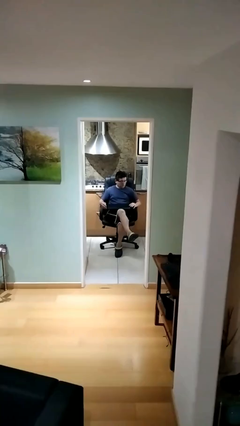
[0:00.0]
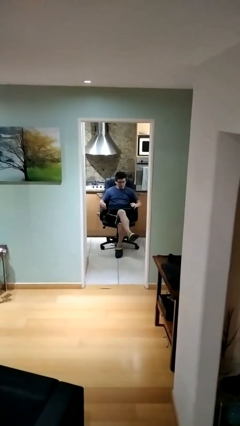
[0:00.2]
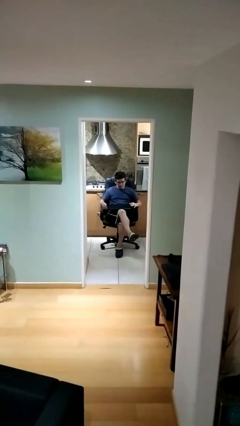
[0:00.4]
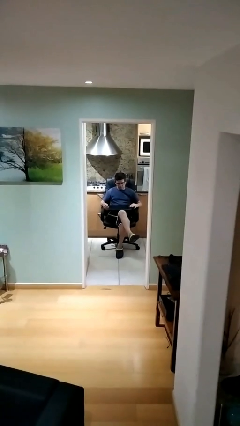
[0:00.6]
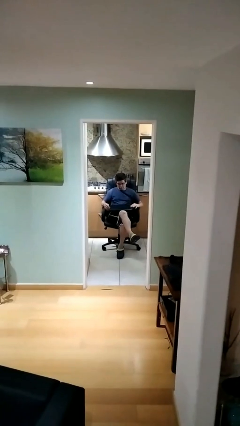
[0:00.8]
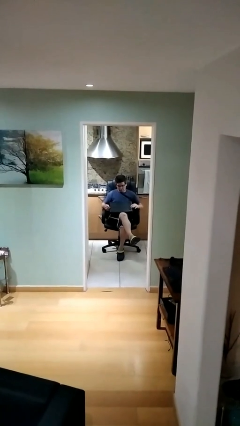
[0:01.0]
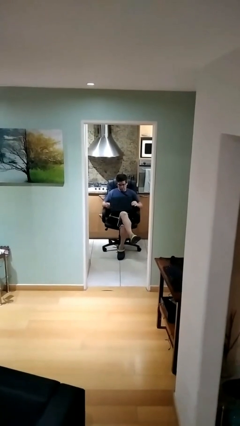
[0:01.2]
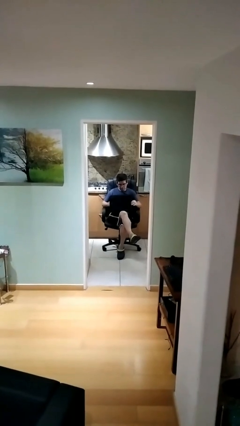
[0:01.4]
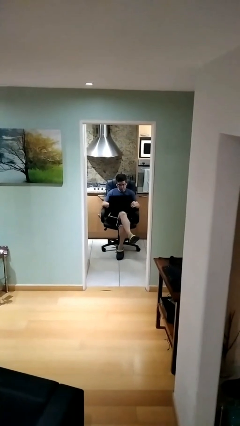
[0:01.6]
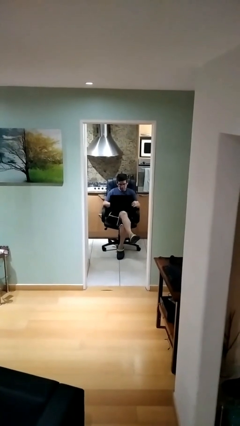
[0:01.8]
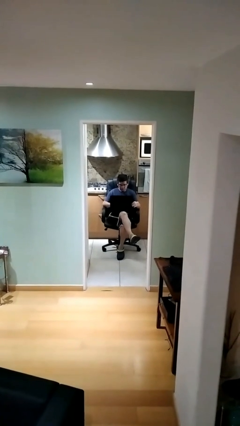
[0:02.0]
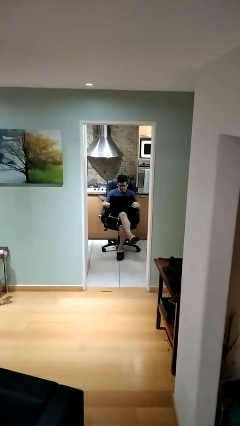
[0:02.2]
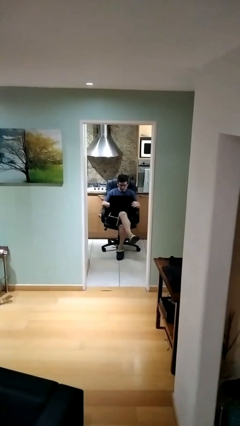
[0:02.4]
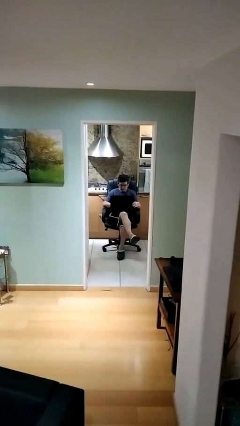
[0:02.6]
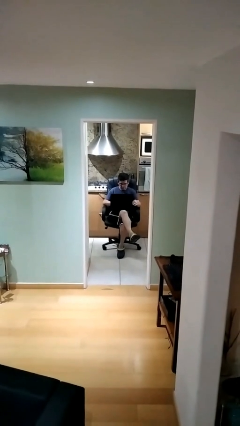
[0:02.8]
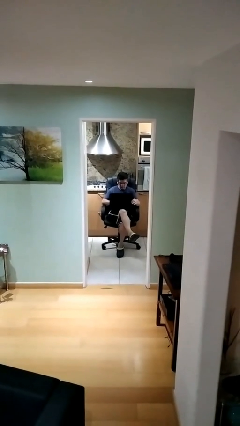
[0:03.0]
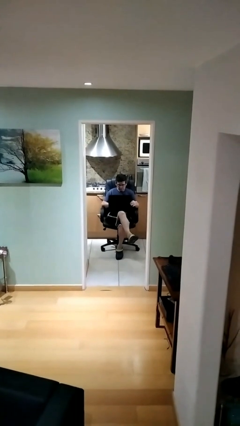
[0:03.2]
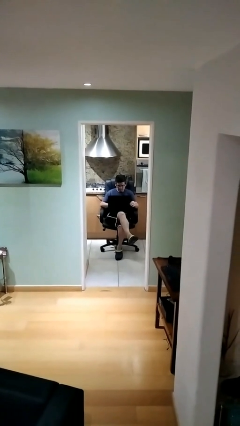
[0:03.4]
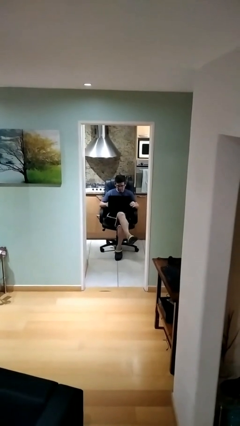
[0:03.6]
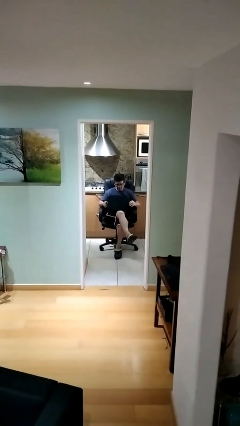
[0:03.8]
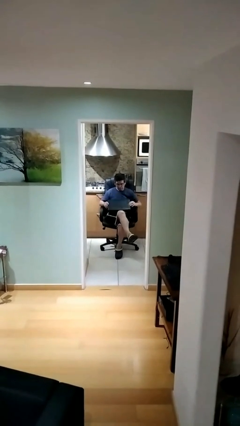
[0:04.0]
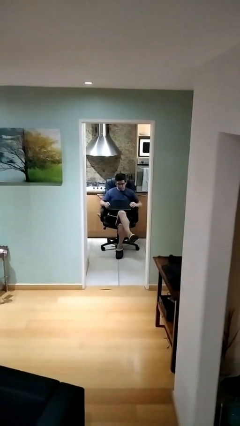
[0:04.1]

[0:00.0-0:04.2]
person interacts with laptop

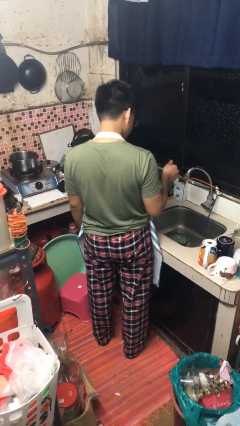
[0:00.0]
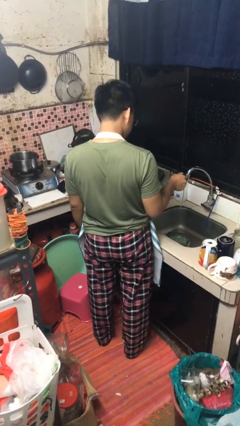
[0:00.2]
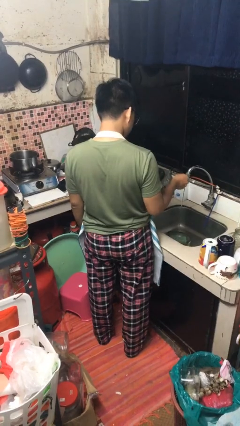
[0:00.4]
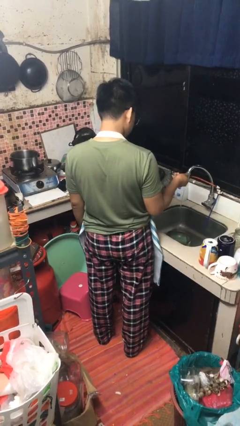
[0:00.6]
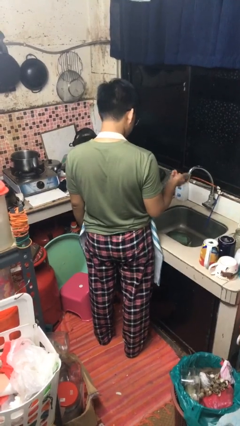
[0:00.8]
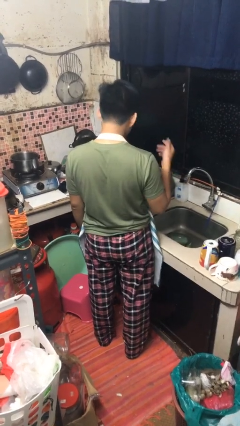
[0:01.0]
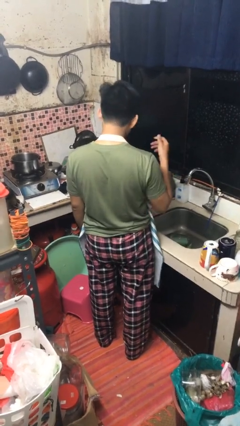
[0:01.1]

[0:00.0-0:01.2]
person turns off faucet

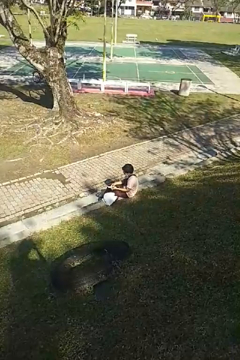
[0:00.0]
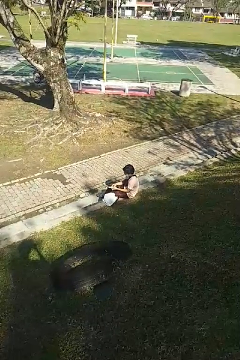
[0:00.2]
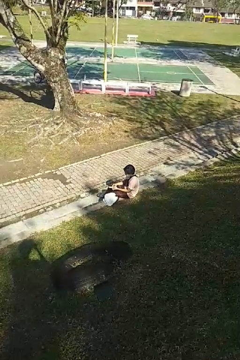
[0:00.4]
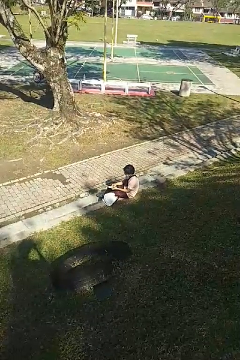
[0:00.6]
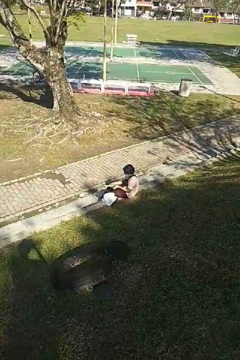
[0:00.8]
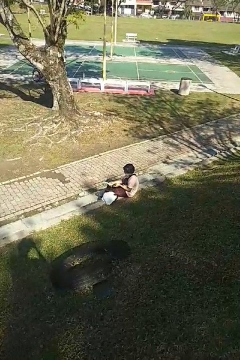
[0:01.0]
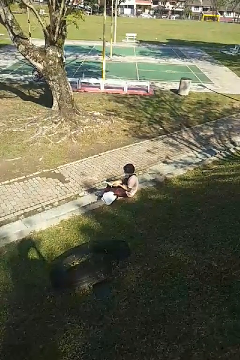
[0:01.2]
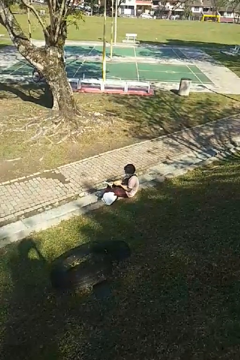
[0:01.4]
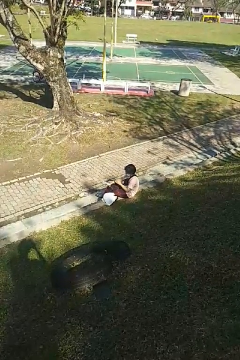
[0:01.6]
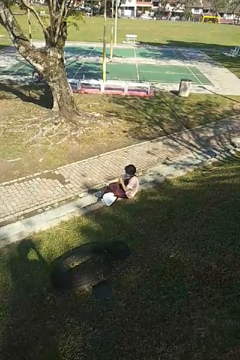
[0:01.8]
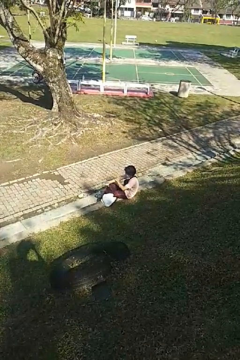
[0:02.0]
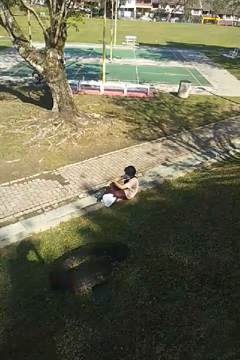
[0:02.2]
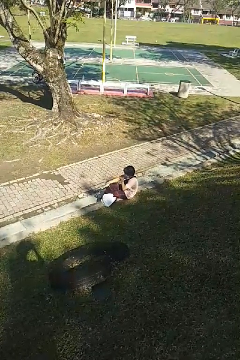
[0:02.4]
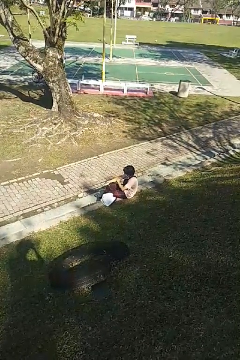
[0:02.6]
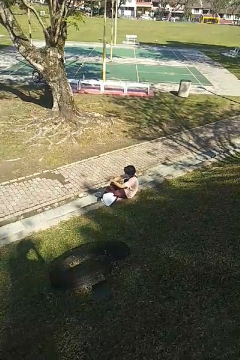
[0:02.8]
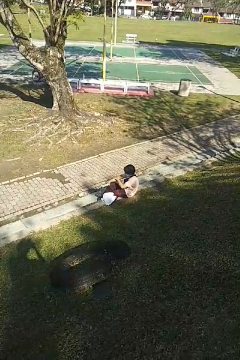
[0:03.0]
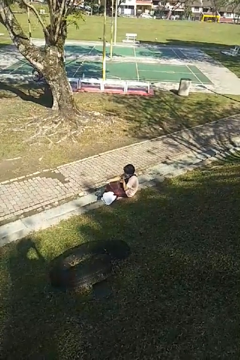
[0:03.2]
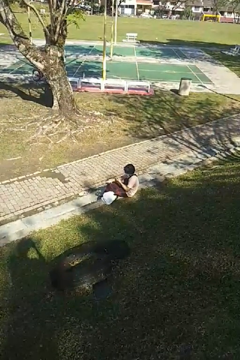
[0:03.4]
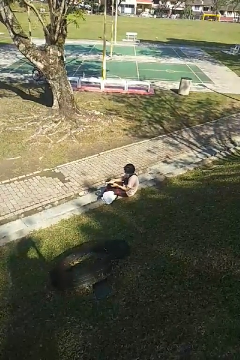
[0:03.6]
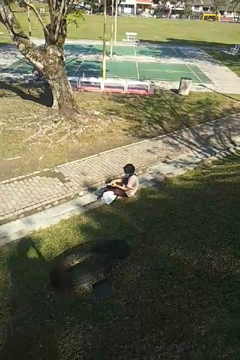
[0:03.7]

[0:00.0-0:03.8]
person applies sunscreen

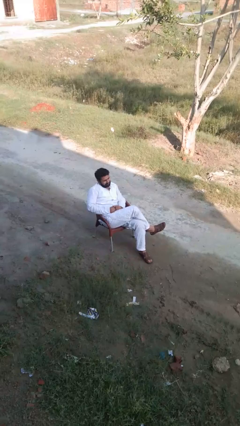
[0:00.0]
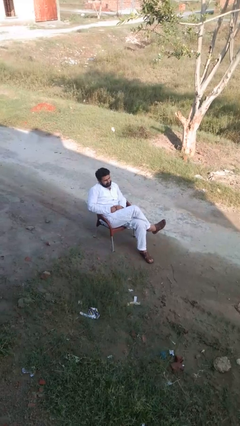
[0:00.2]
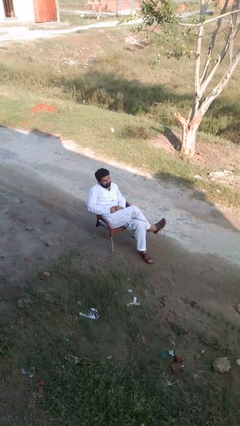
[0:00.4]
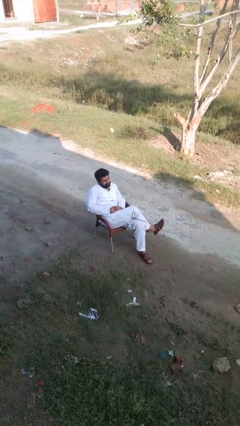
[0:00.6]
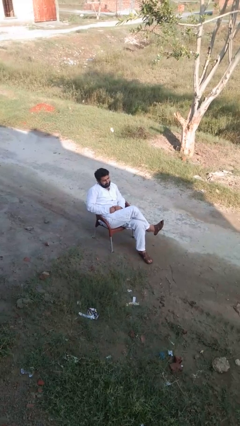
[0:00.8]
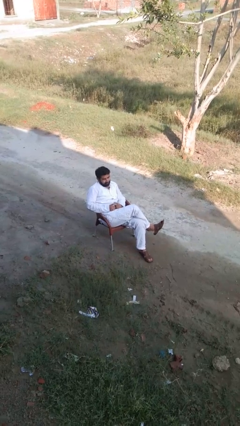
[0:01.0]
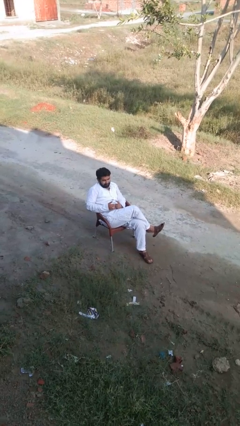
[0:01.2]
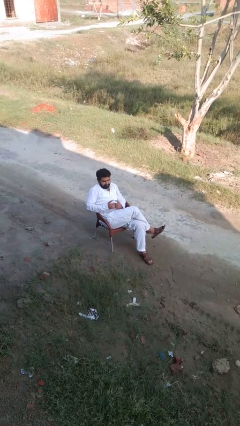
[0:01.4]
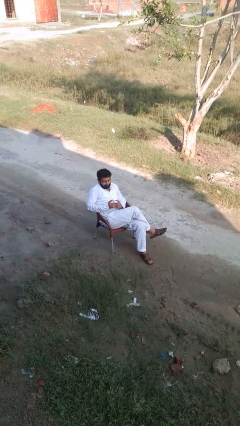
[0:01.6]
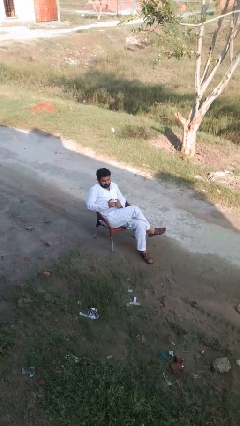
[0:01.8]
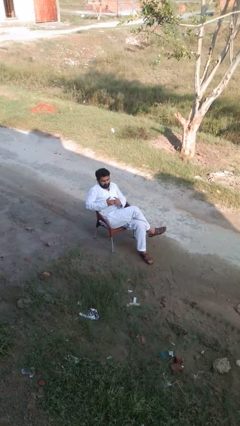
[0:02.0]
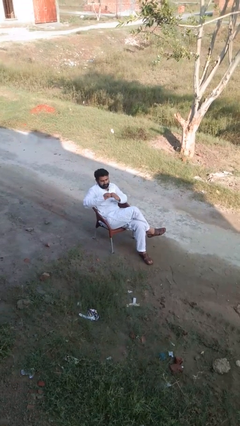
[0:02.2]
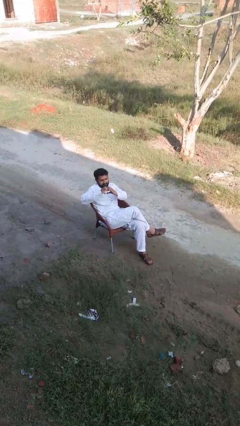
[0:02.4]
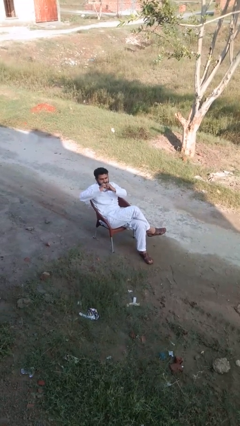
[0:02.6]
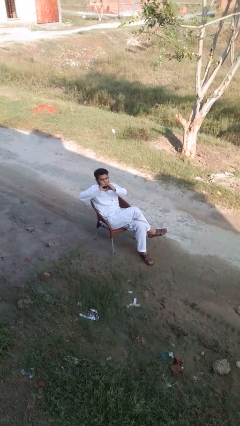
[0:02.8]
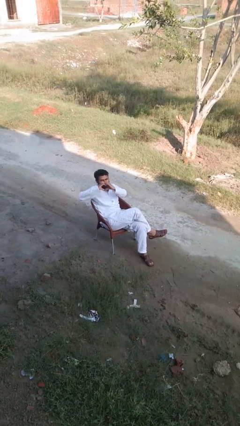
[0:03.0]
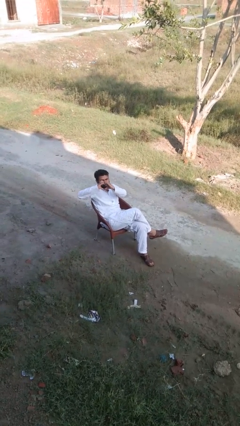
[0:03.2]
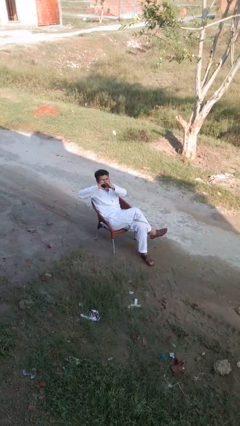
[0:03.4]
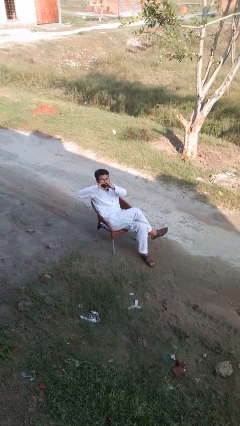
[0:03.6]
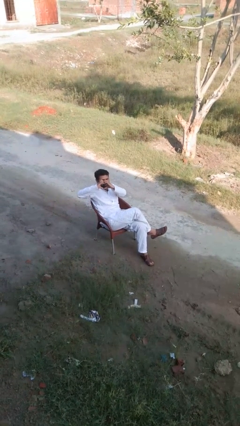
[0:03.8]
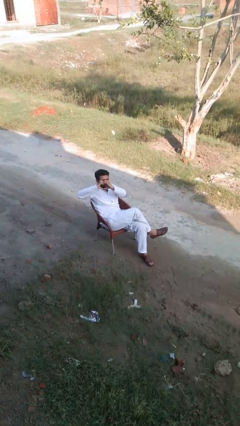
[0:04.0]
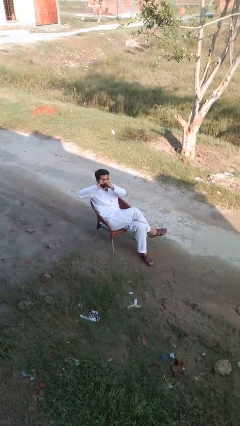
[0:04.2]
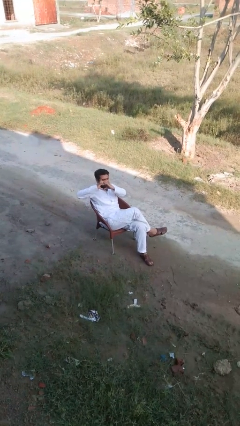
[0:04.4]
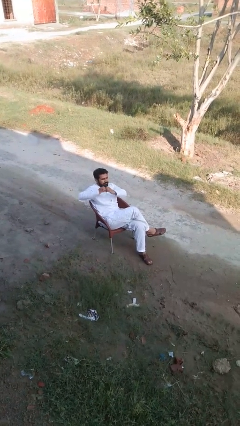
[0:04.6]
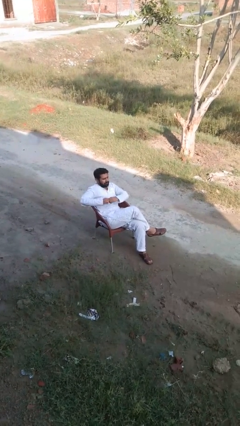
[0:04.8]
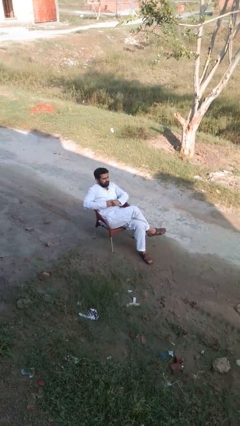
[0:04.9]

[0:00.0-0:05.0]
person gestures heart

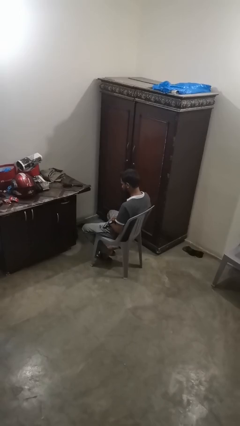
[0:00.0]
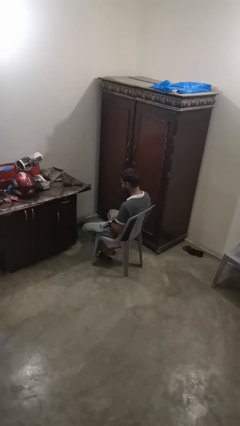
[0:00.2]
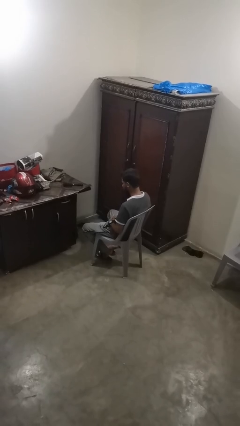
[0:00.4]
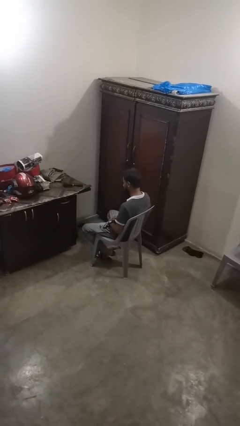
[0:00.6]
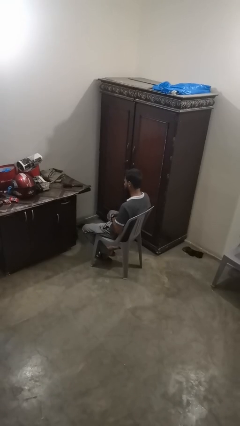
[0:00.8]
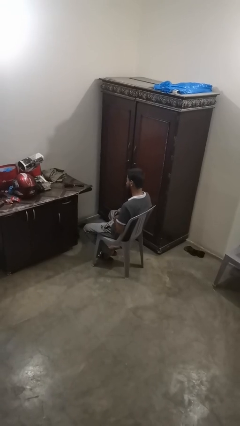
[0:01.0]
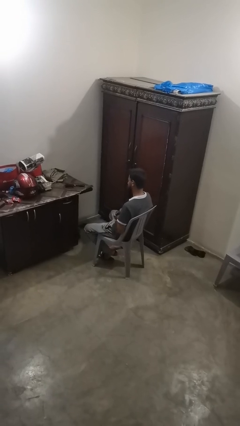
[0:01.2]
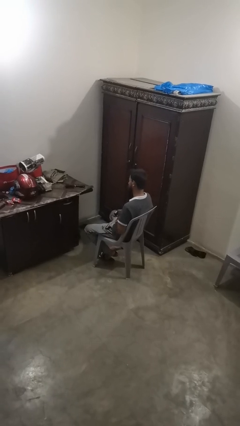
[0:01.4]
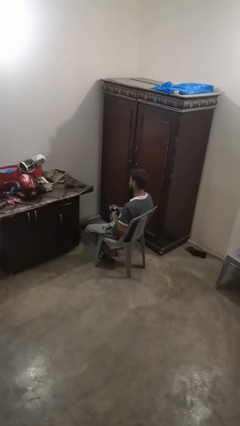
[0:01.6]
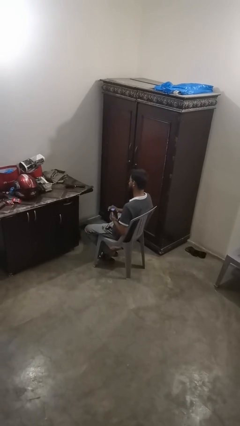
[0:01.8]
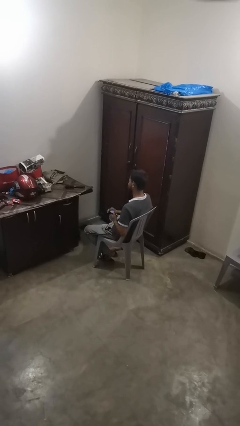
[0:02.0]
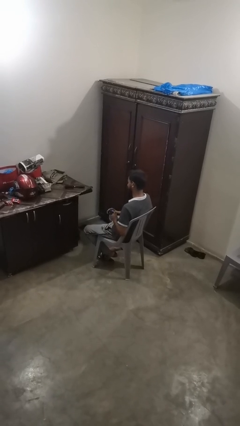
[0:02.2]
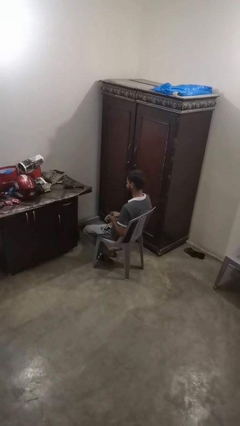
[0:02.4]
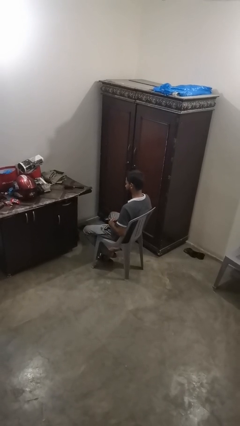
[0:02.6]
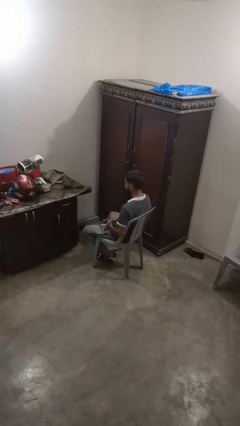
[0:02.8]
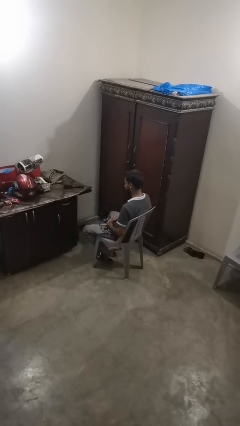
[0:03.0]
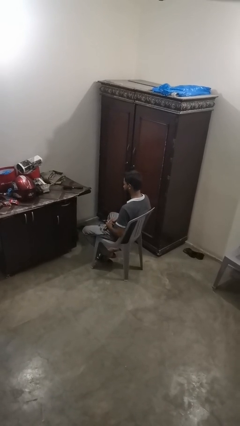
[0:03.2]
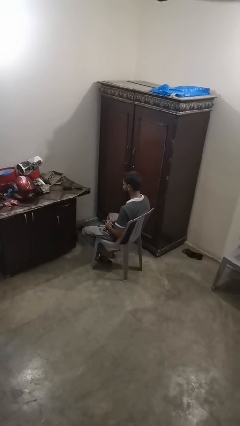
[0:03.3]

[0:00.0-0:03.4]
person takes off wristwatch
